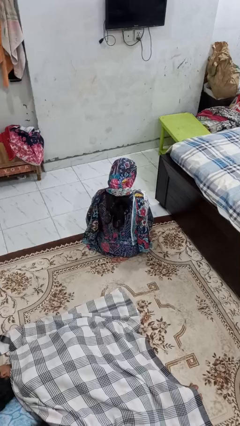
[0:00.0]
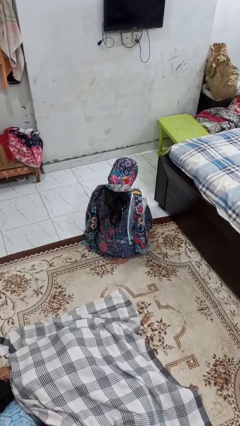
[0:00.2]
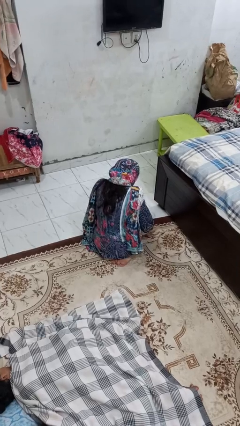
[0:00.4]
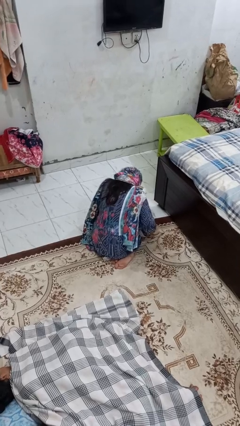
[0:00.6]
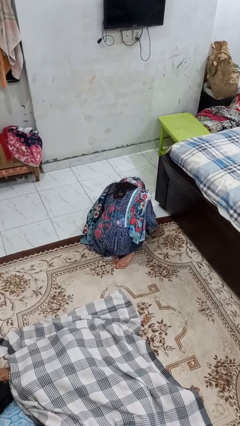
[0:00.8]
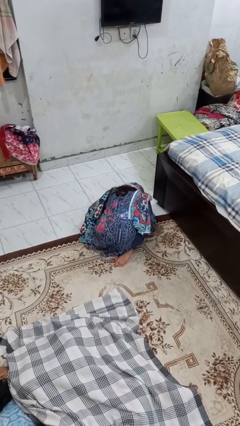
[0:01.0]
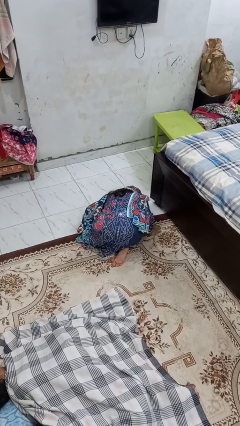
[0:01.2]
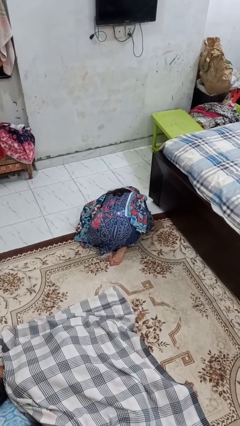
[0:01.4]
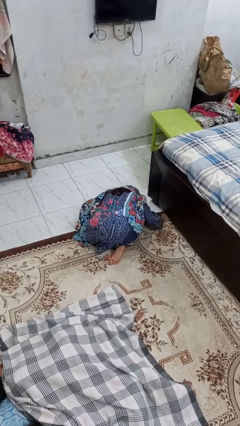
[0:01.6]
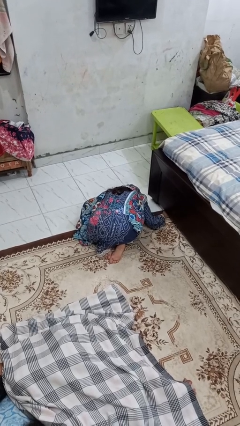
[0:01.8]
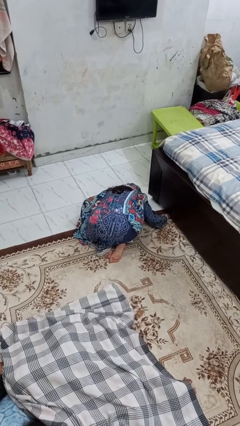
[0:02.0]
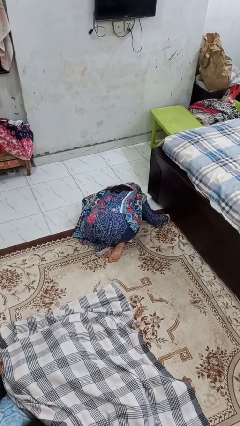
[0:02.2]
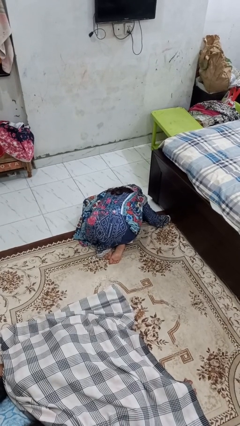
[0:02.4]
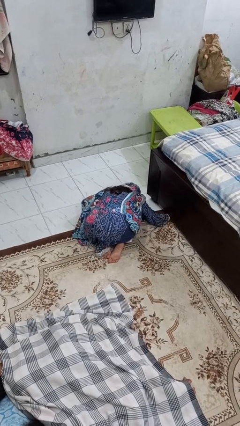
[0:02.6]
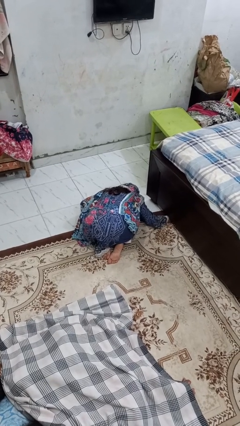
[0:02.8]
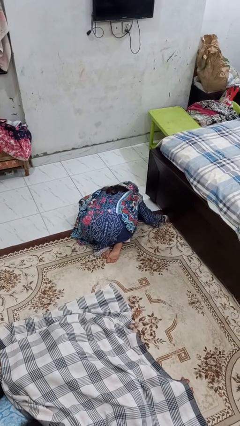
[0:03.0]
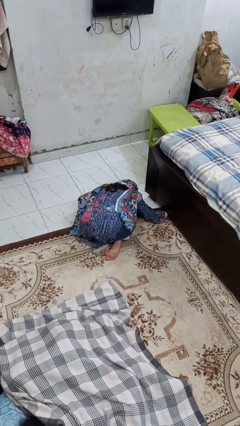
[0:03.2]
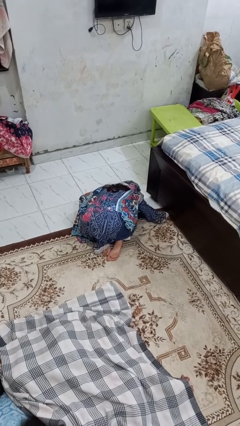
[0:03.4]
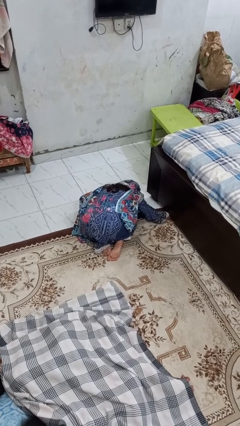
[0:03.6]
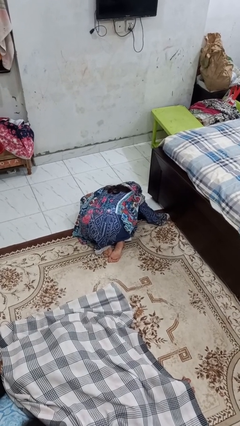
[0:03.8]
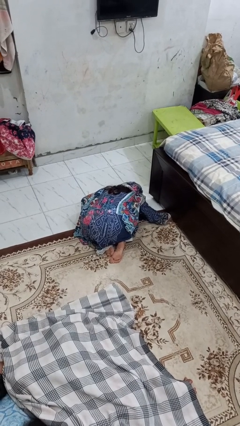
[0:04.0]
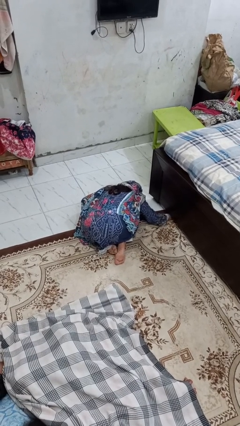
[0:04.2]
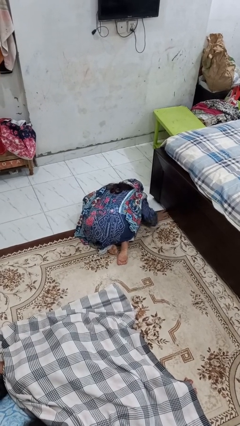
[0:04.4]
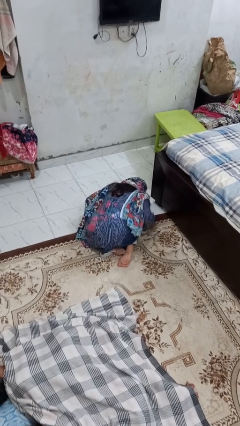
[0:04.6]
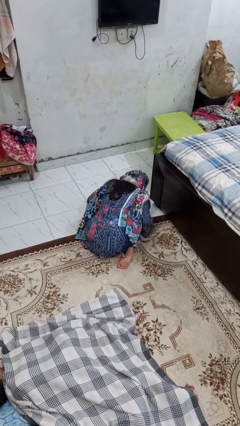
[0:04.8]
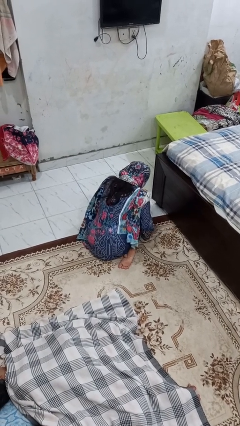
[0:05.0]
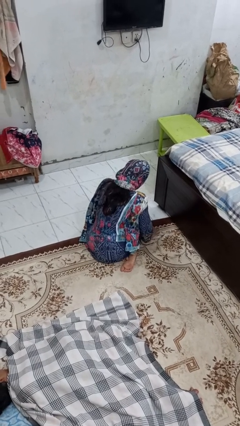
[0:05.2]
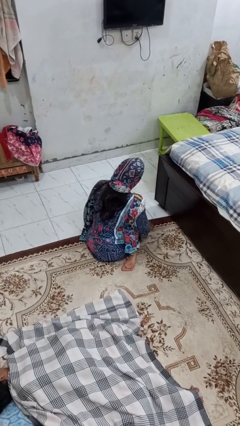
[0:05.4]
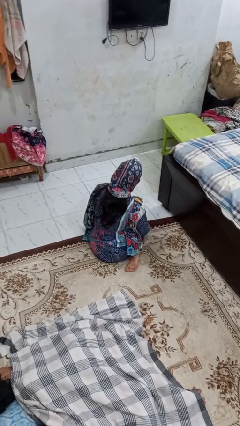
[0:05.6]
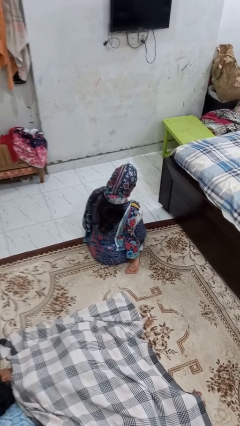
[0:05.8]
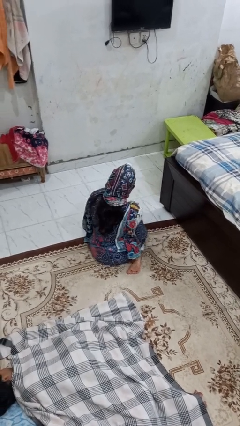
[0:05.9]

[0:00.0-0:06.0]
person searches under bed

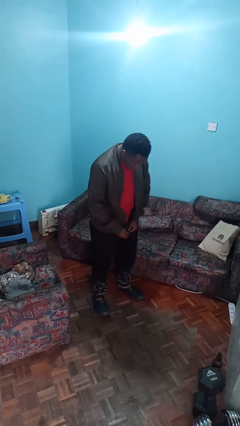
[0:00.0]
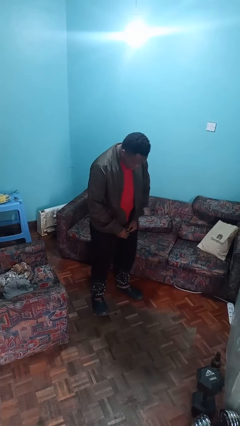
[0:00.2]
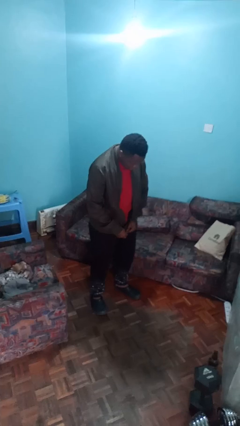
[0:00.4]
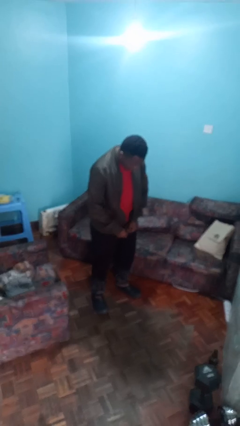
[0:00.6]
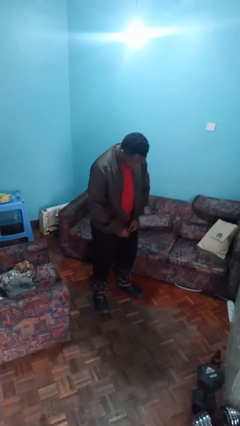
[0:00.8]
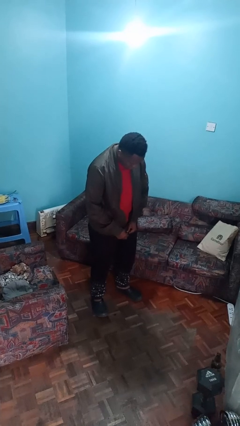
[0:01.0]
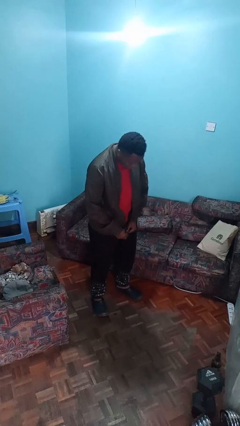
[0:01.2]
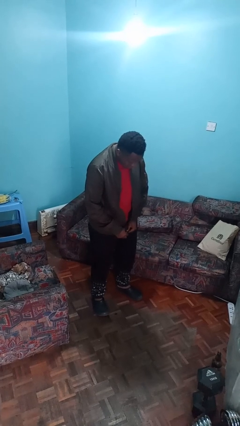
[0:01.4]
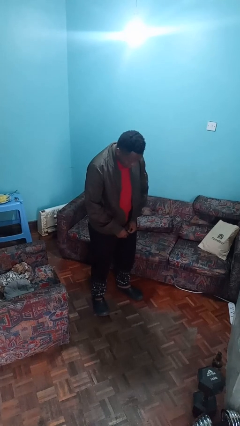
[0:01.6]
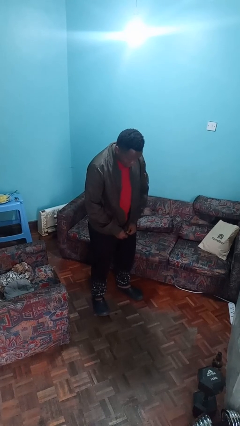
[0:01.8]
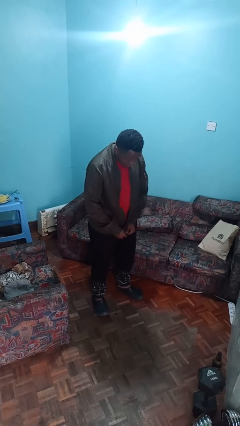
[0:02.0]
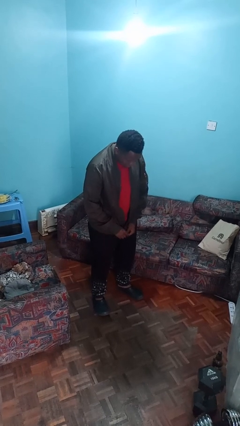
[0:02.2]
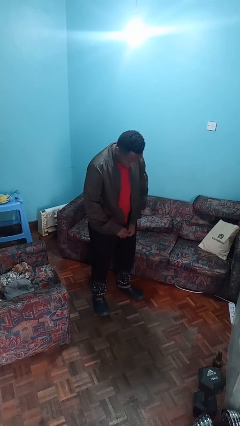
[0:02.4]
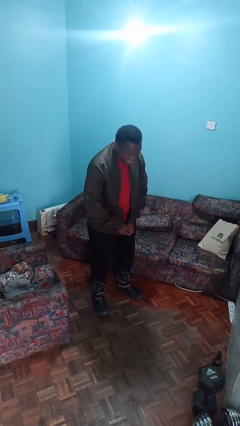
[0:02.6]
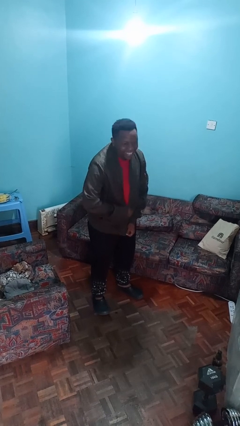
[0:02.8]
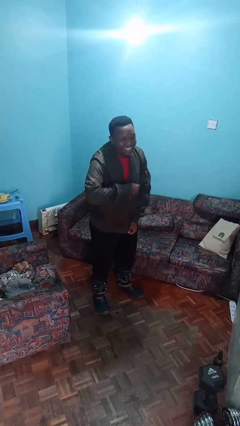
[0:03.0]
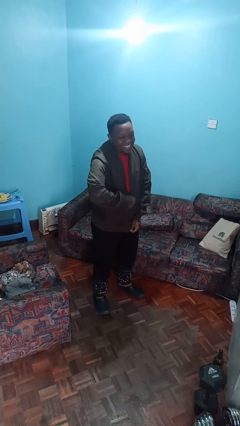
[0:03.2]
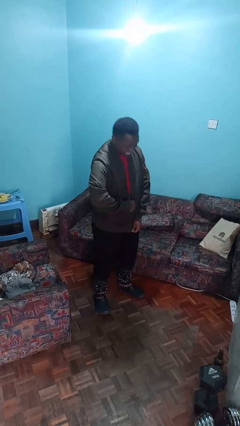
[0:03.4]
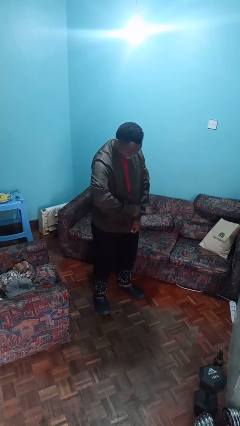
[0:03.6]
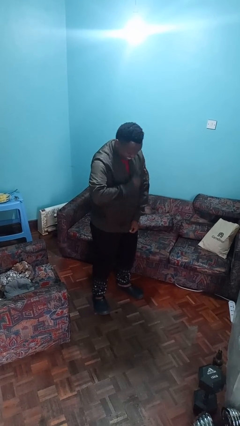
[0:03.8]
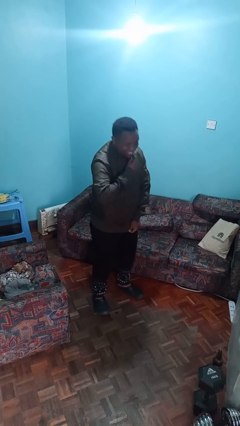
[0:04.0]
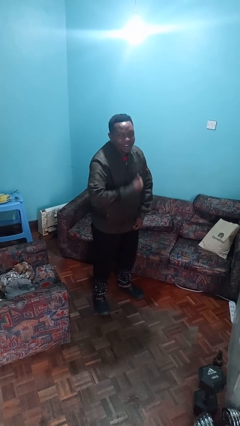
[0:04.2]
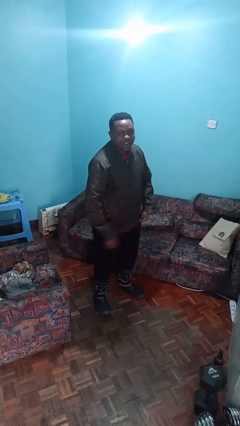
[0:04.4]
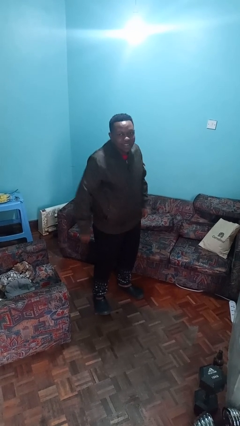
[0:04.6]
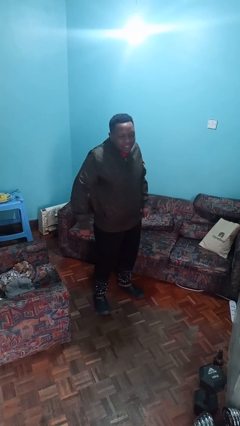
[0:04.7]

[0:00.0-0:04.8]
person zips up jacket

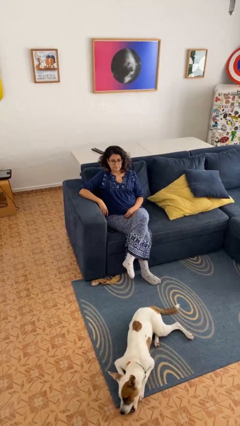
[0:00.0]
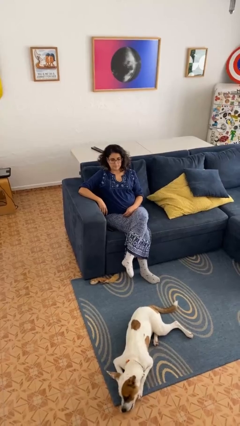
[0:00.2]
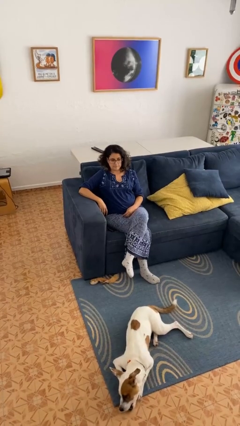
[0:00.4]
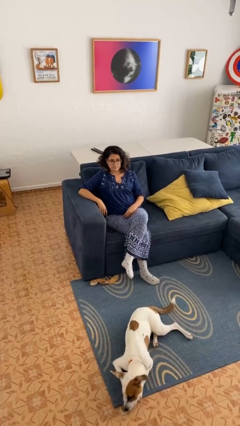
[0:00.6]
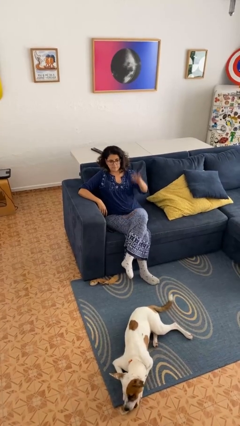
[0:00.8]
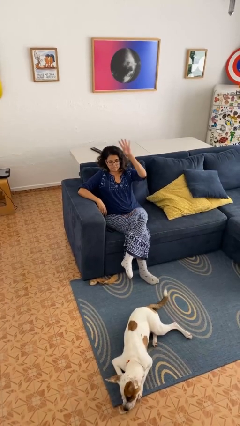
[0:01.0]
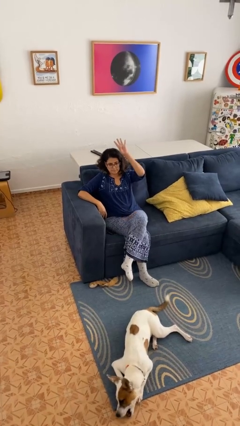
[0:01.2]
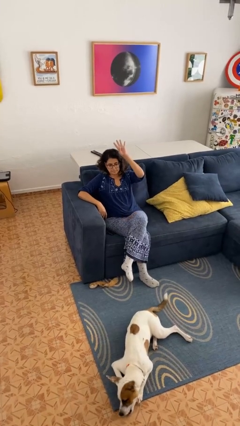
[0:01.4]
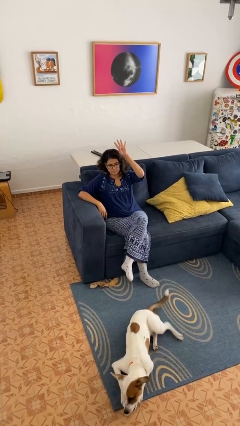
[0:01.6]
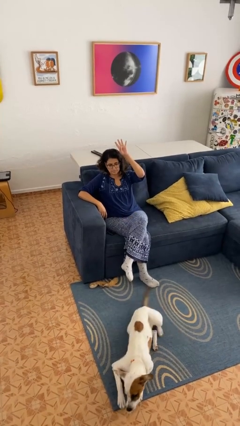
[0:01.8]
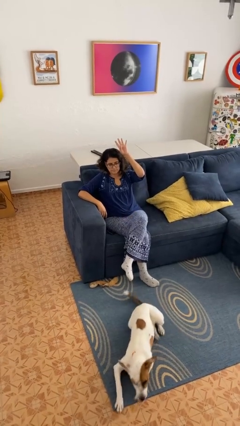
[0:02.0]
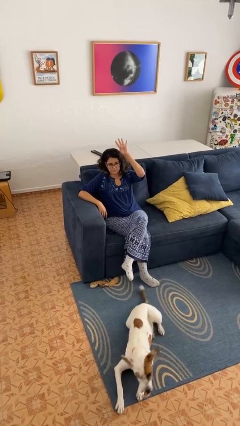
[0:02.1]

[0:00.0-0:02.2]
person gestures number four

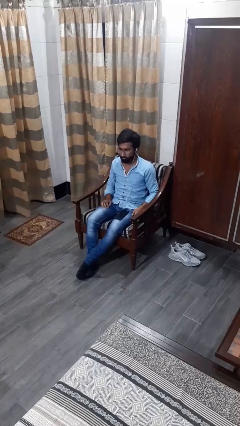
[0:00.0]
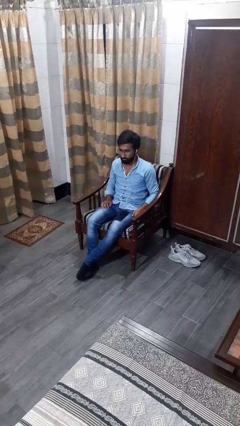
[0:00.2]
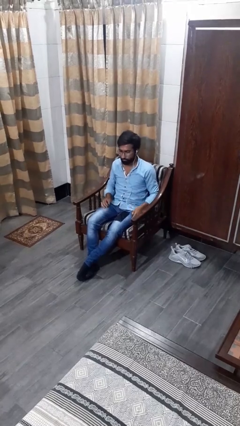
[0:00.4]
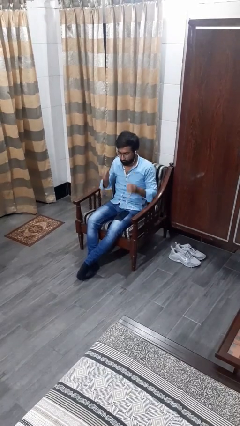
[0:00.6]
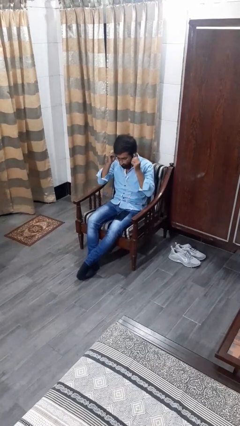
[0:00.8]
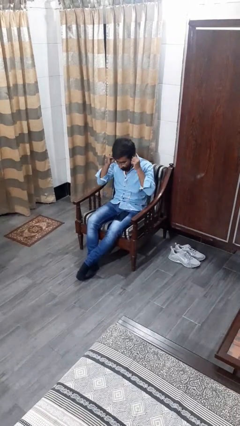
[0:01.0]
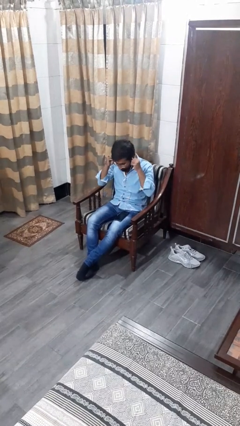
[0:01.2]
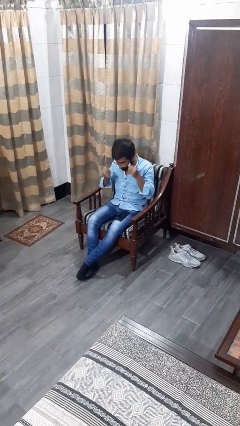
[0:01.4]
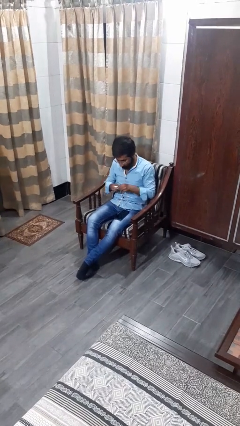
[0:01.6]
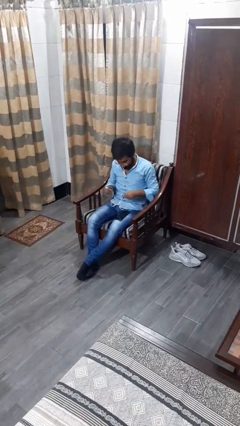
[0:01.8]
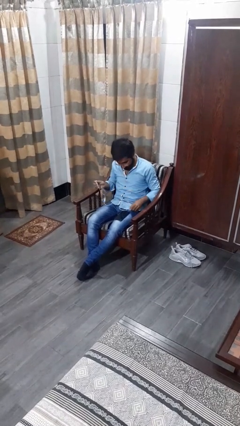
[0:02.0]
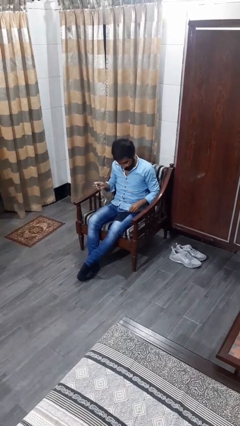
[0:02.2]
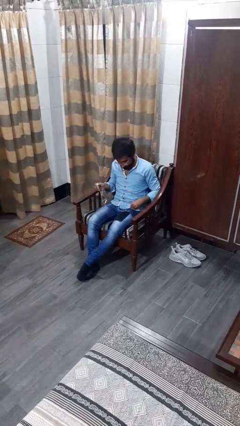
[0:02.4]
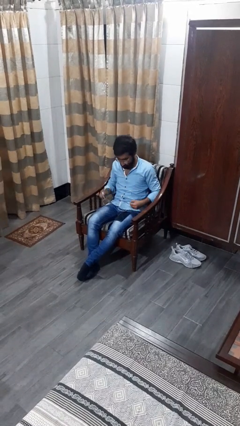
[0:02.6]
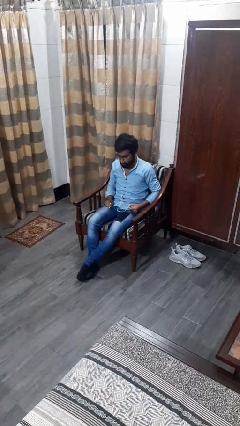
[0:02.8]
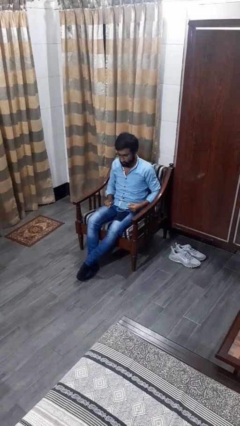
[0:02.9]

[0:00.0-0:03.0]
person takes off headphones

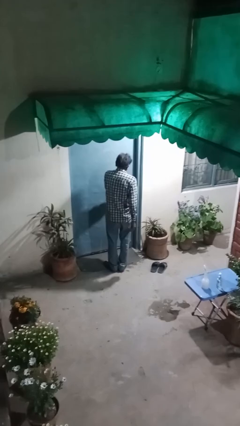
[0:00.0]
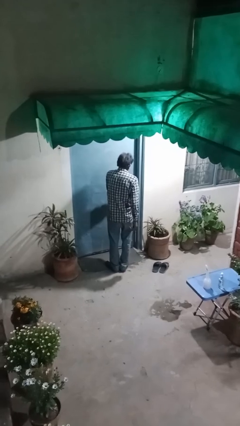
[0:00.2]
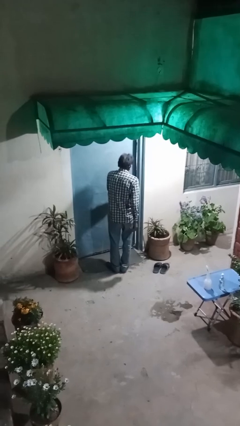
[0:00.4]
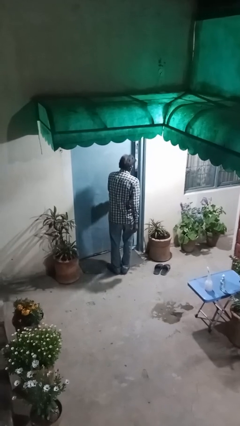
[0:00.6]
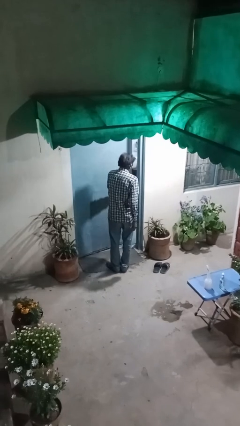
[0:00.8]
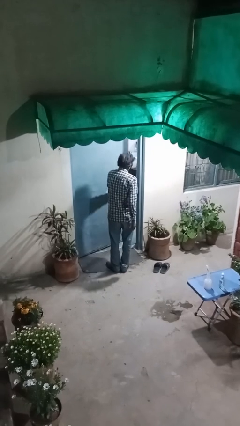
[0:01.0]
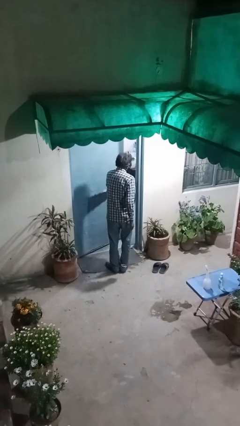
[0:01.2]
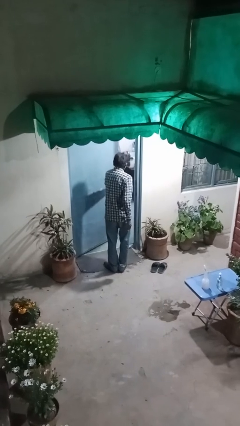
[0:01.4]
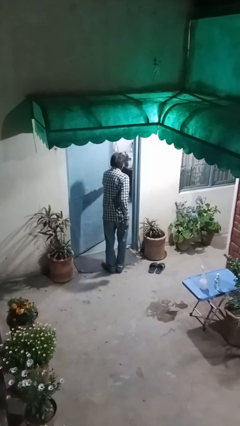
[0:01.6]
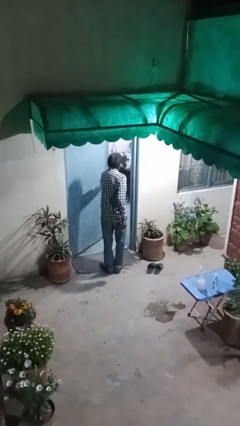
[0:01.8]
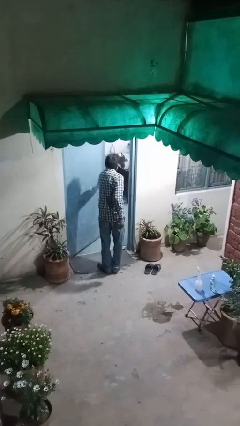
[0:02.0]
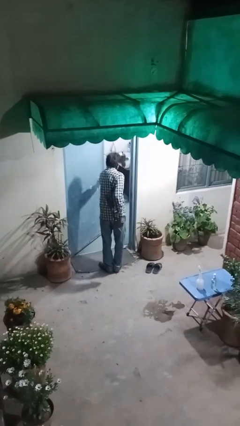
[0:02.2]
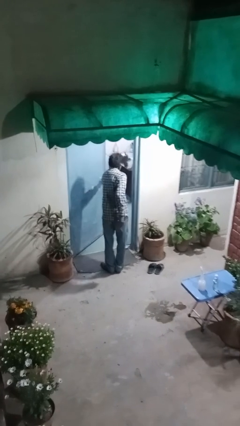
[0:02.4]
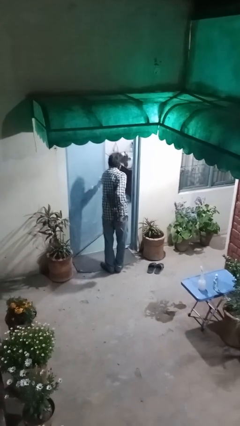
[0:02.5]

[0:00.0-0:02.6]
person opens facility door
